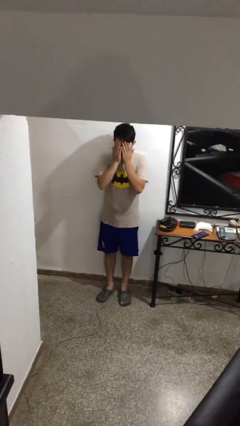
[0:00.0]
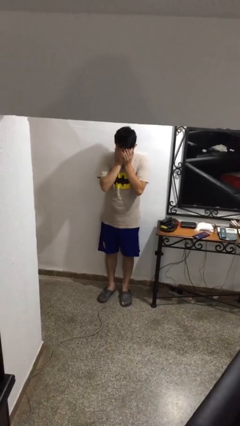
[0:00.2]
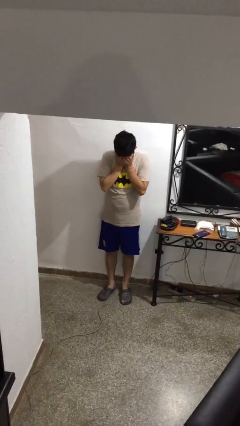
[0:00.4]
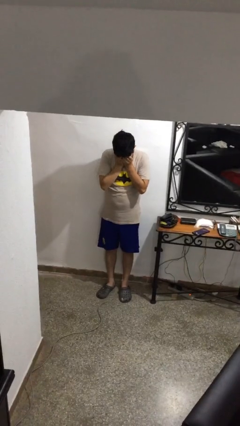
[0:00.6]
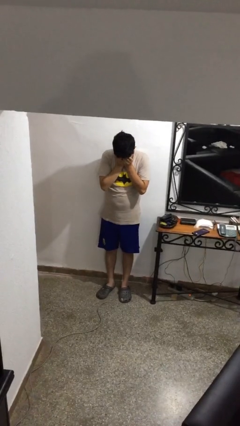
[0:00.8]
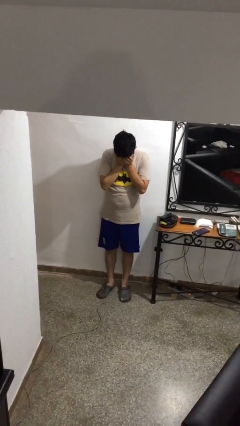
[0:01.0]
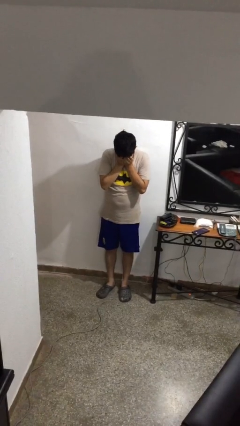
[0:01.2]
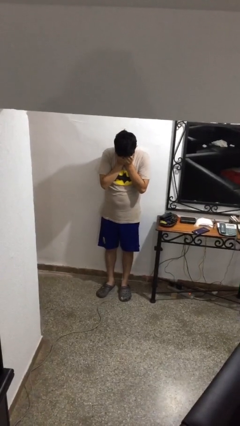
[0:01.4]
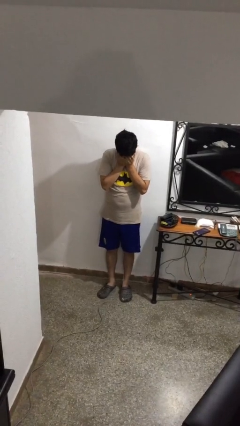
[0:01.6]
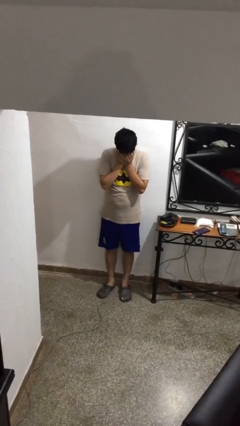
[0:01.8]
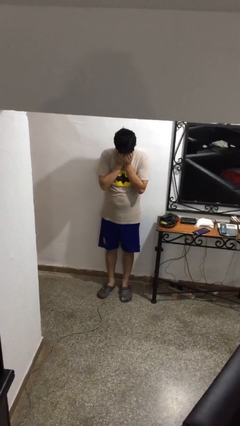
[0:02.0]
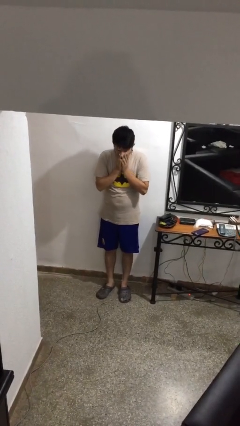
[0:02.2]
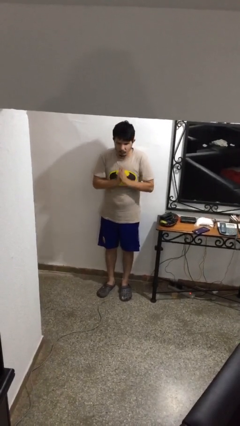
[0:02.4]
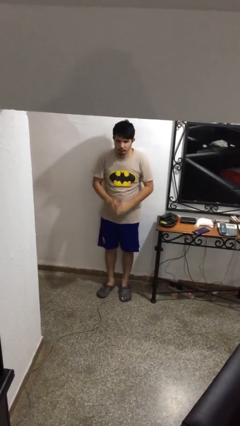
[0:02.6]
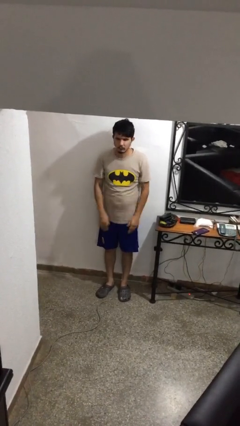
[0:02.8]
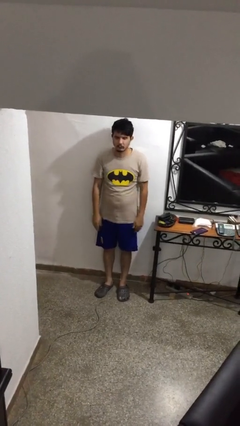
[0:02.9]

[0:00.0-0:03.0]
person covers face with hands

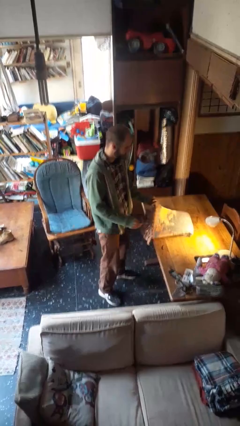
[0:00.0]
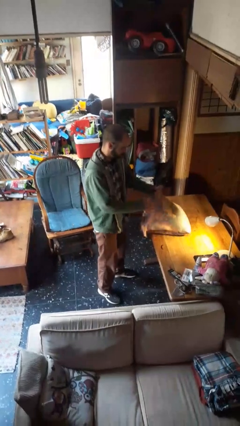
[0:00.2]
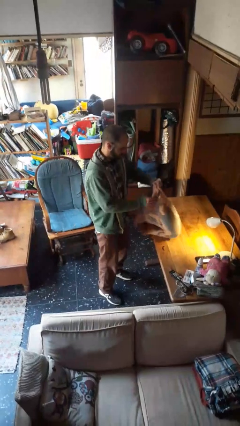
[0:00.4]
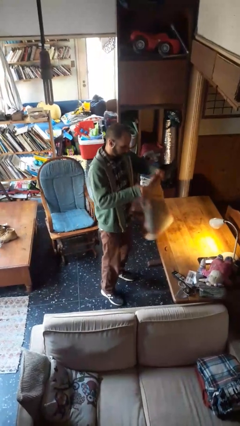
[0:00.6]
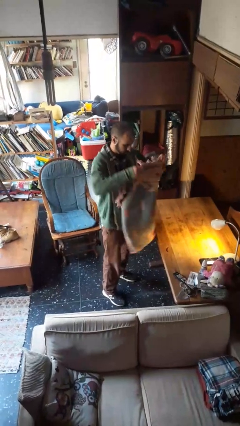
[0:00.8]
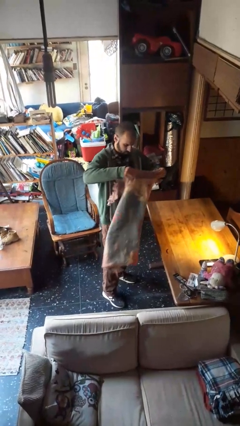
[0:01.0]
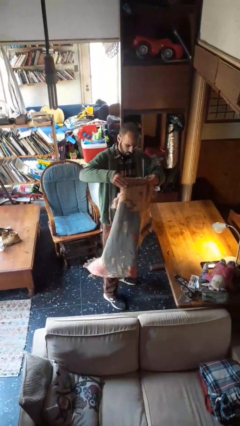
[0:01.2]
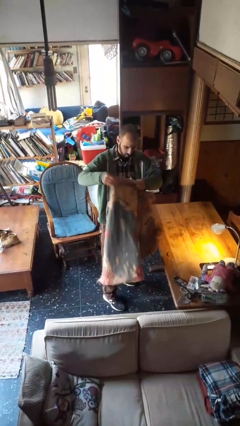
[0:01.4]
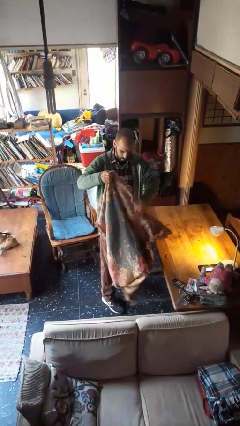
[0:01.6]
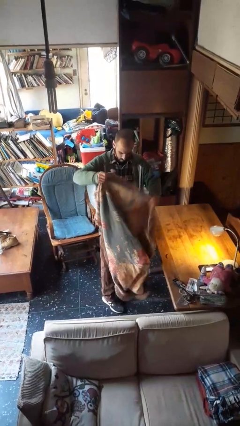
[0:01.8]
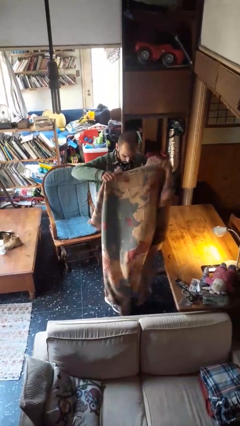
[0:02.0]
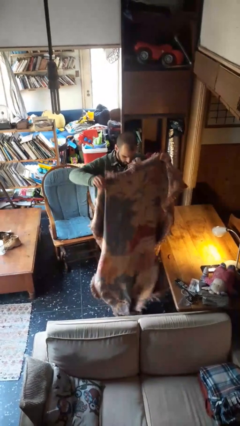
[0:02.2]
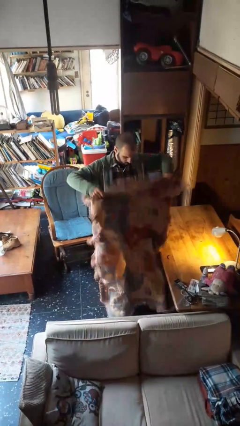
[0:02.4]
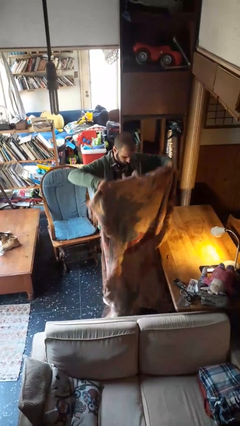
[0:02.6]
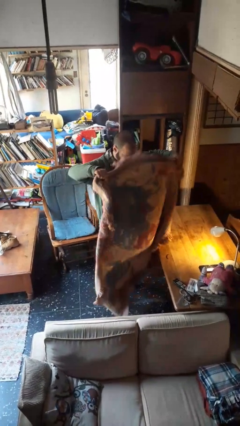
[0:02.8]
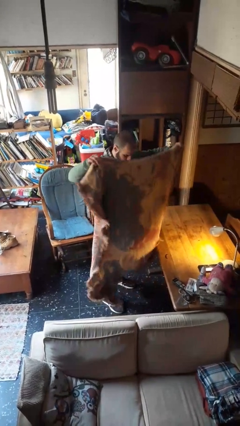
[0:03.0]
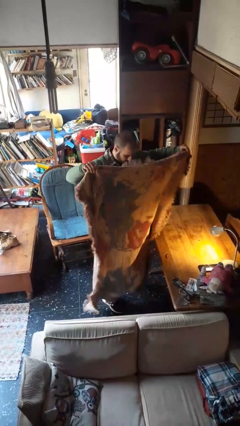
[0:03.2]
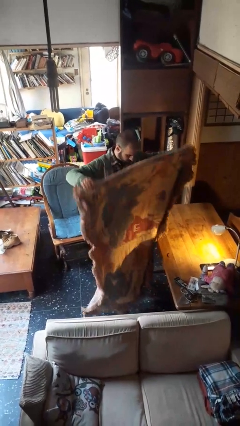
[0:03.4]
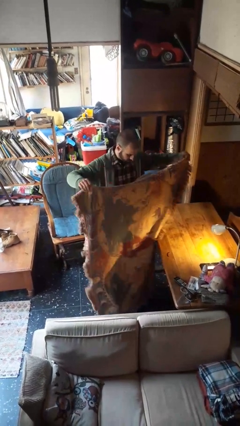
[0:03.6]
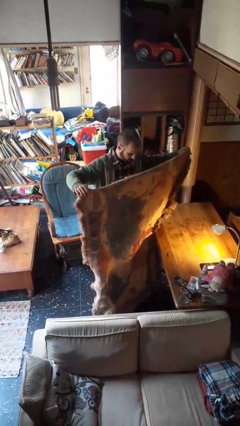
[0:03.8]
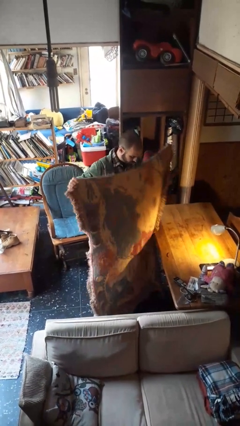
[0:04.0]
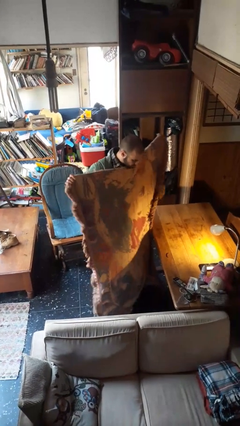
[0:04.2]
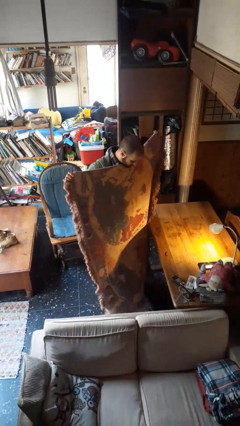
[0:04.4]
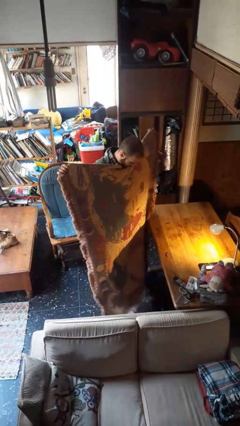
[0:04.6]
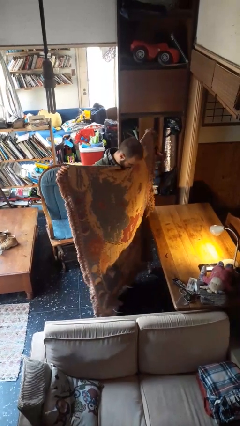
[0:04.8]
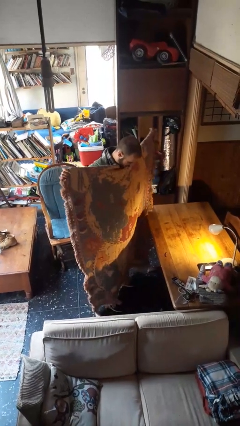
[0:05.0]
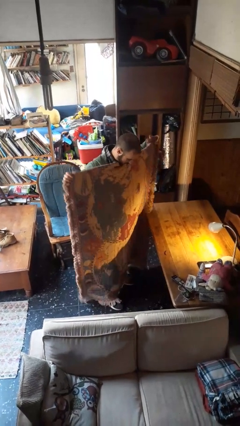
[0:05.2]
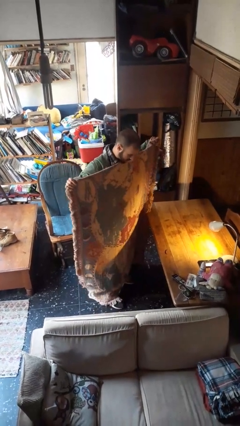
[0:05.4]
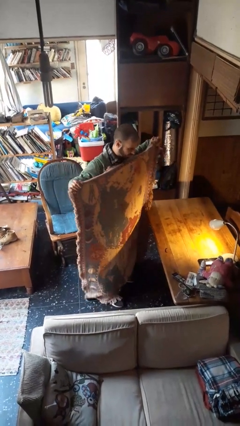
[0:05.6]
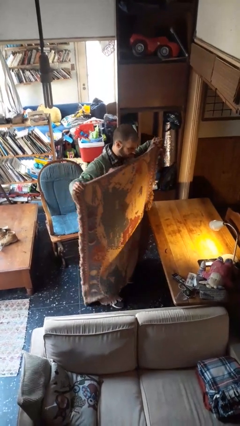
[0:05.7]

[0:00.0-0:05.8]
person unfolds blanket

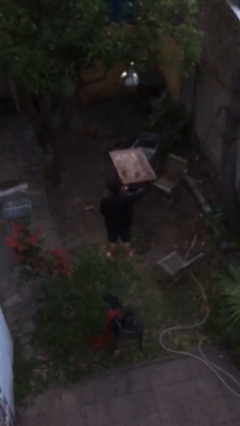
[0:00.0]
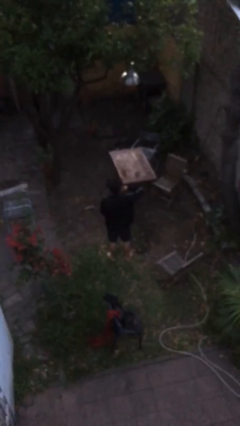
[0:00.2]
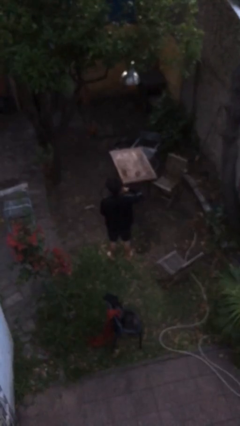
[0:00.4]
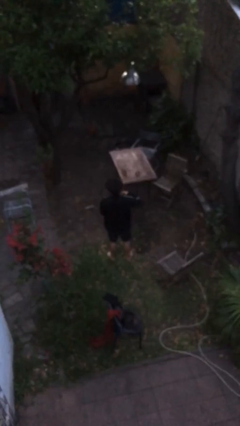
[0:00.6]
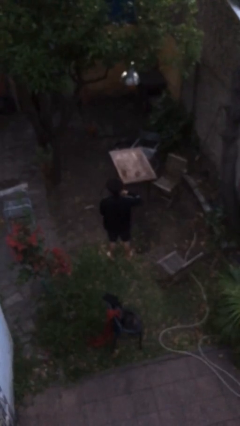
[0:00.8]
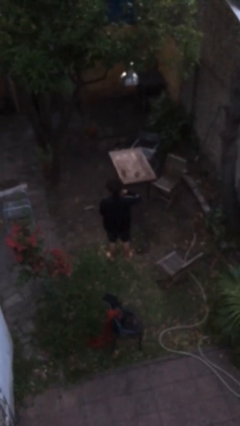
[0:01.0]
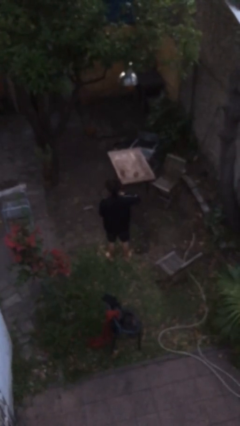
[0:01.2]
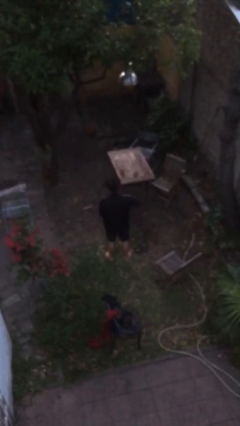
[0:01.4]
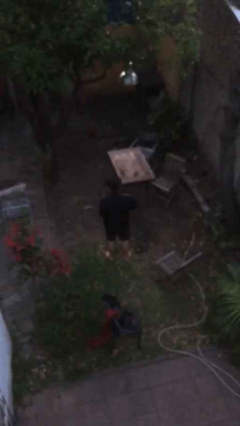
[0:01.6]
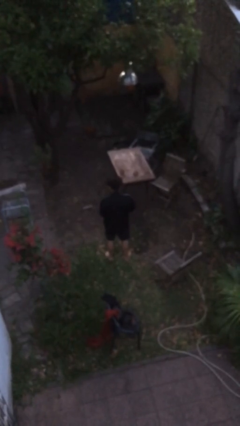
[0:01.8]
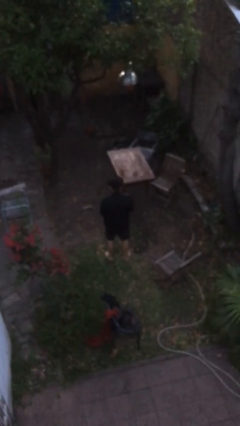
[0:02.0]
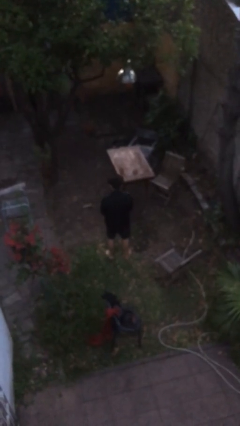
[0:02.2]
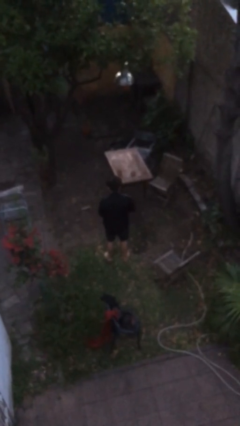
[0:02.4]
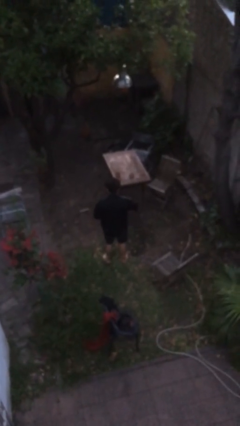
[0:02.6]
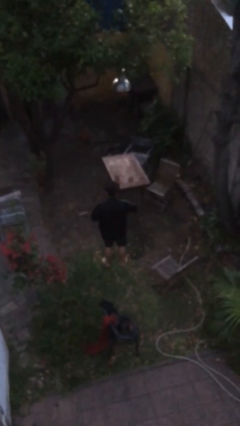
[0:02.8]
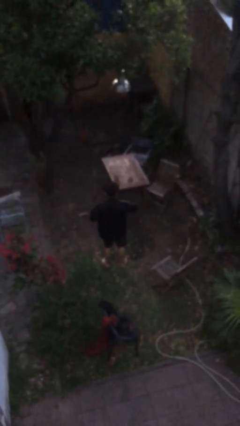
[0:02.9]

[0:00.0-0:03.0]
person unzips jacket

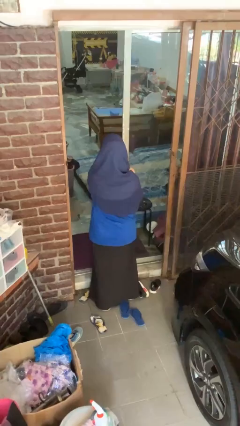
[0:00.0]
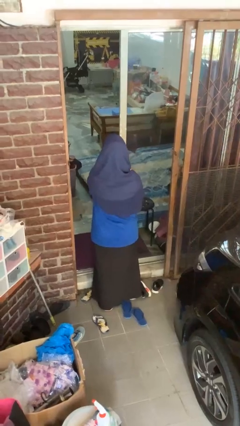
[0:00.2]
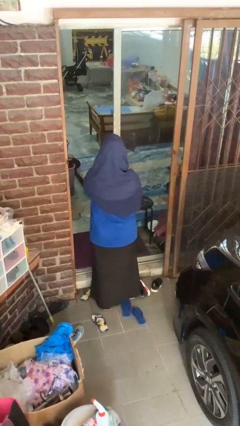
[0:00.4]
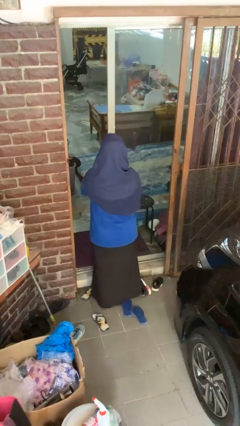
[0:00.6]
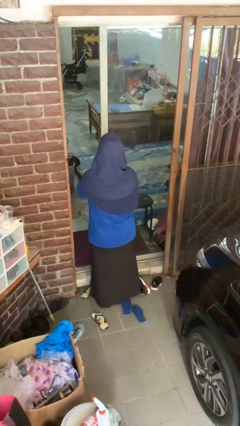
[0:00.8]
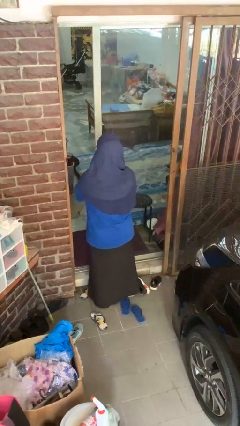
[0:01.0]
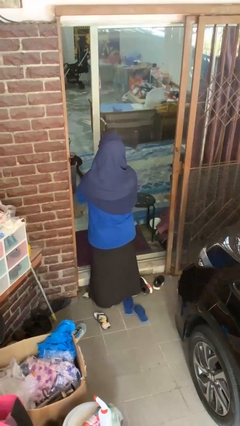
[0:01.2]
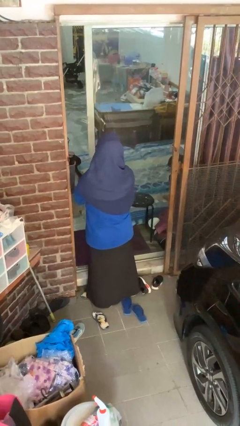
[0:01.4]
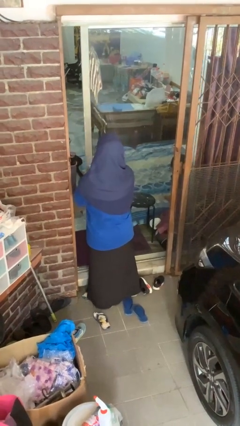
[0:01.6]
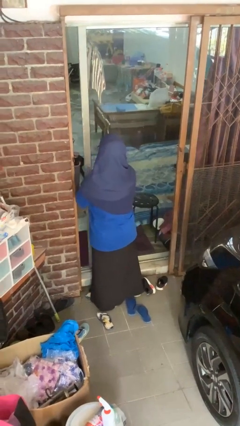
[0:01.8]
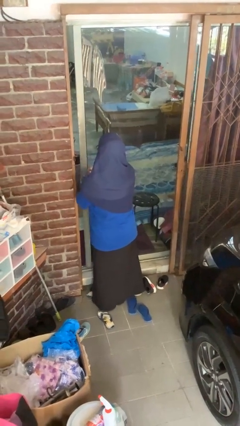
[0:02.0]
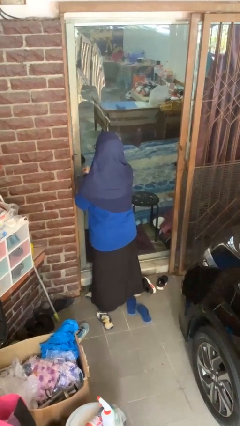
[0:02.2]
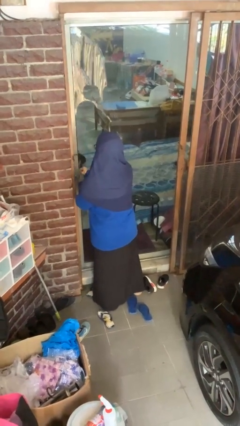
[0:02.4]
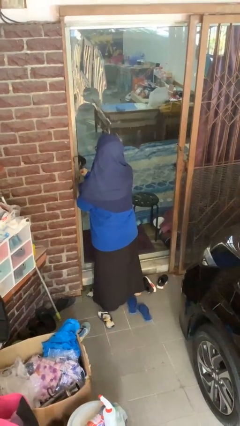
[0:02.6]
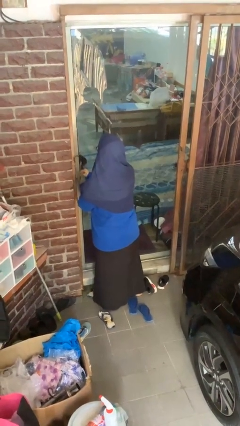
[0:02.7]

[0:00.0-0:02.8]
person closes sliding door

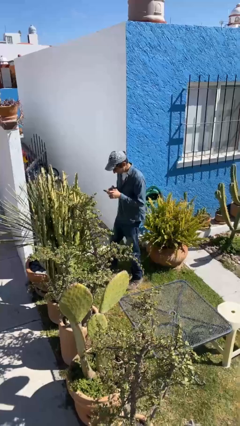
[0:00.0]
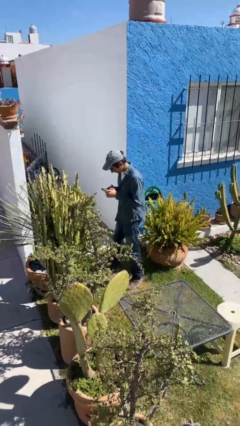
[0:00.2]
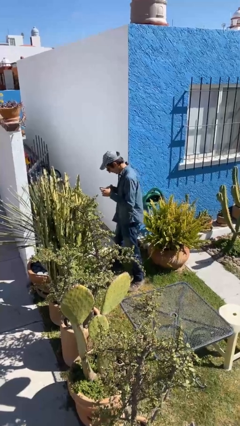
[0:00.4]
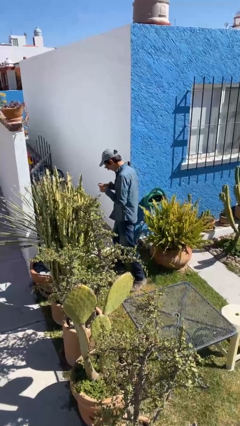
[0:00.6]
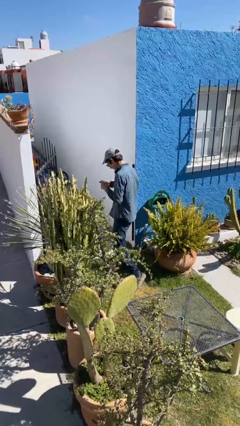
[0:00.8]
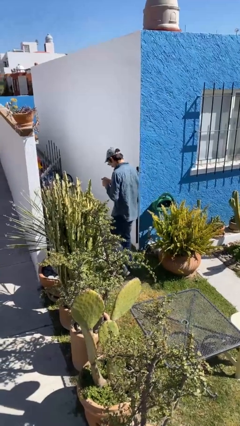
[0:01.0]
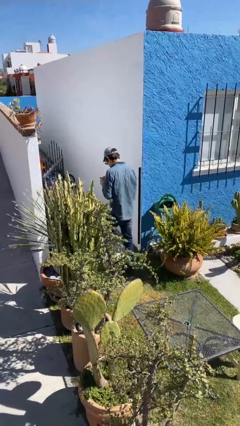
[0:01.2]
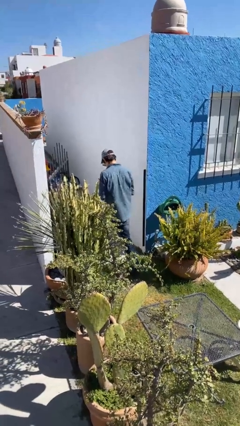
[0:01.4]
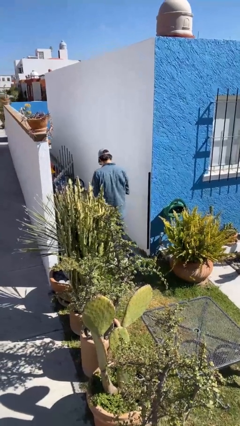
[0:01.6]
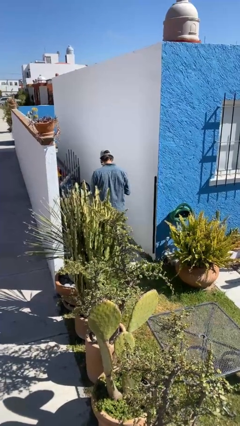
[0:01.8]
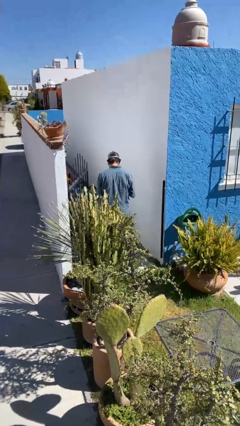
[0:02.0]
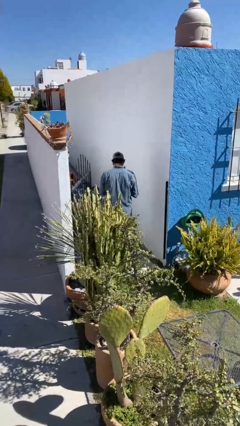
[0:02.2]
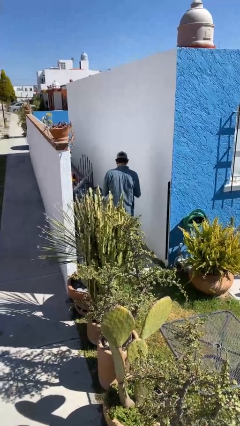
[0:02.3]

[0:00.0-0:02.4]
person exits scene through structure

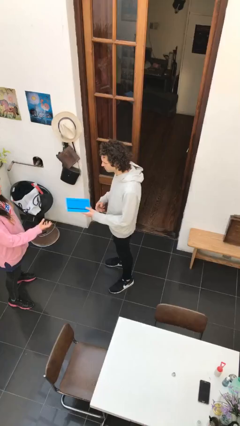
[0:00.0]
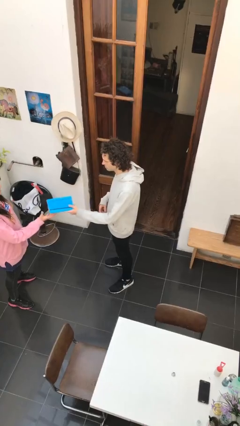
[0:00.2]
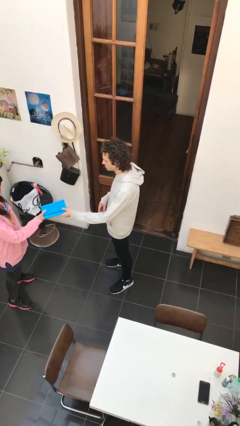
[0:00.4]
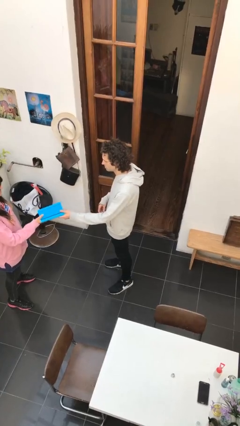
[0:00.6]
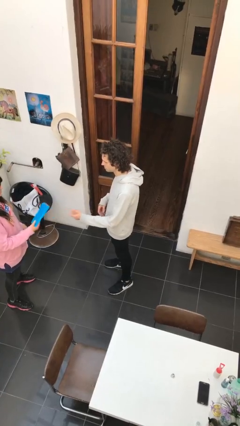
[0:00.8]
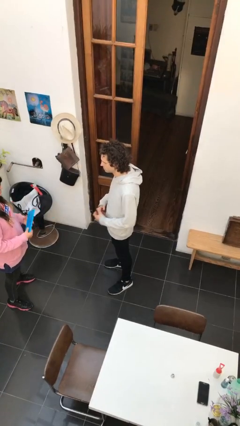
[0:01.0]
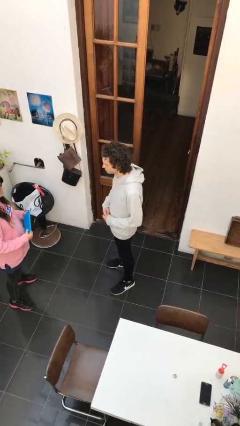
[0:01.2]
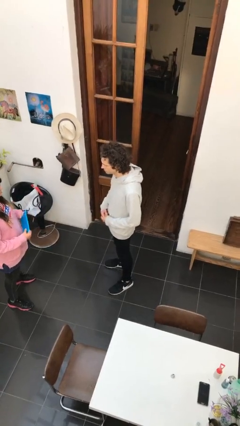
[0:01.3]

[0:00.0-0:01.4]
person transfers object to person
